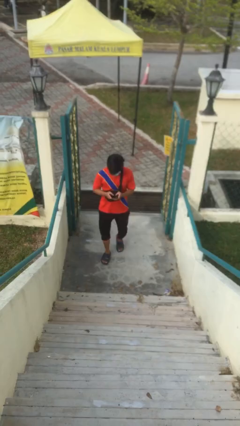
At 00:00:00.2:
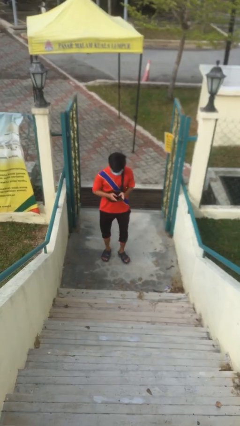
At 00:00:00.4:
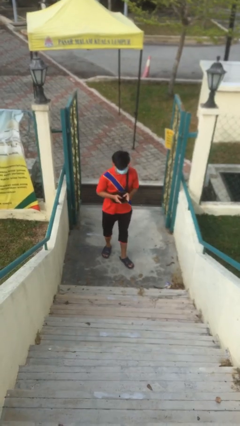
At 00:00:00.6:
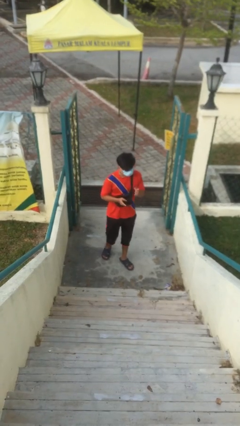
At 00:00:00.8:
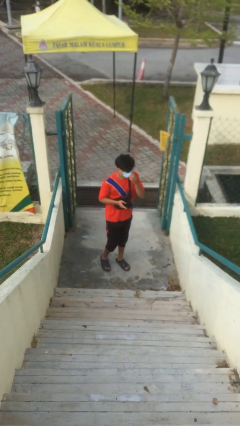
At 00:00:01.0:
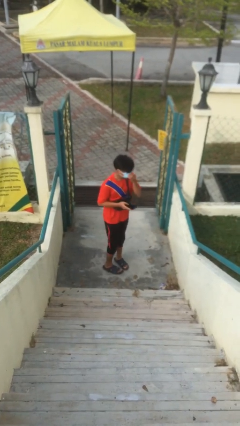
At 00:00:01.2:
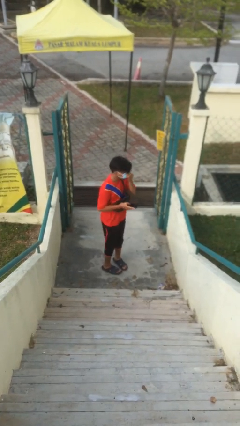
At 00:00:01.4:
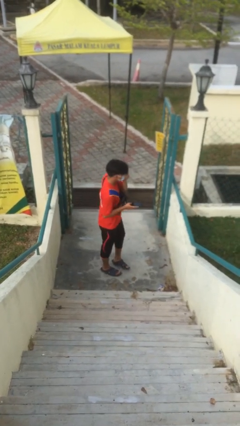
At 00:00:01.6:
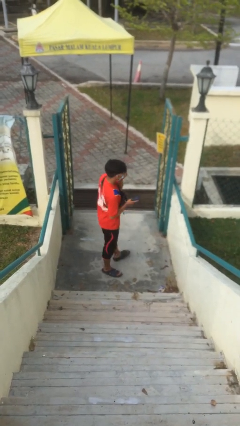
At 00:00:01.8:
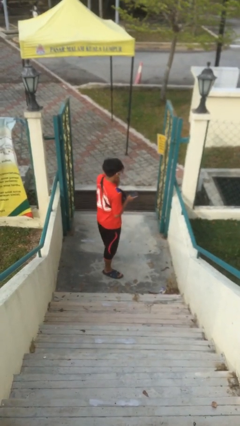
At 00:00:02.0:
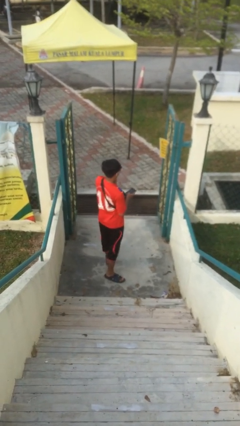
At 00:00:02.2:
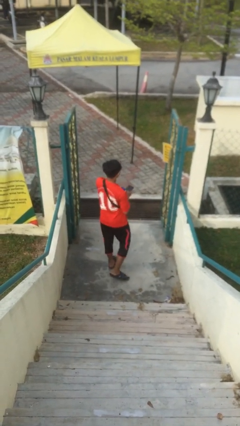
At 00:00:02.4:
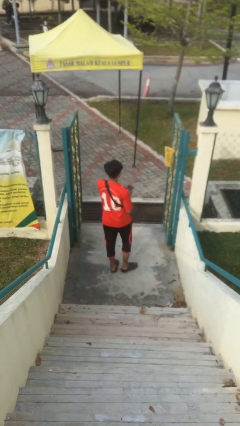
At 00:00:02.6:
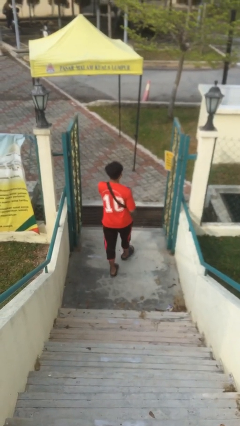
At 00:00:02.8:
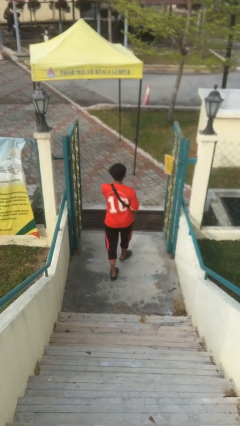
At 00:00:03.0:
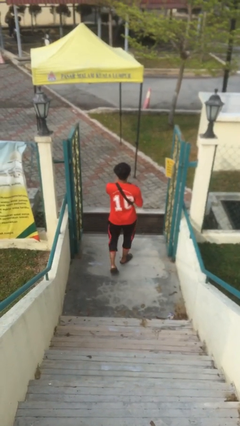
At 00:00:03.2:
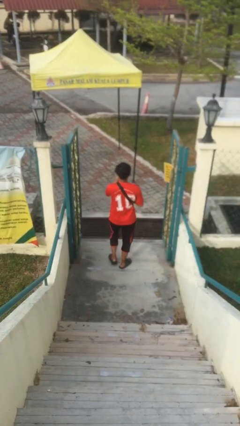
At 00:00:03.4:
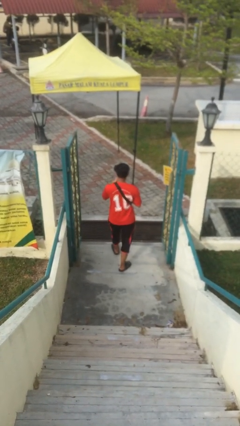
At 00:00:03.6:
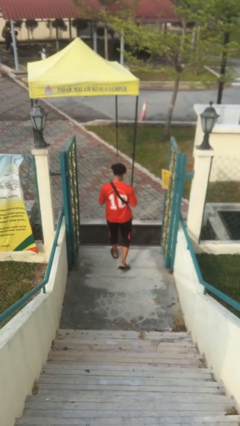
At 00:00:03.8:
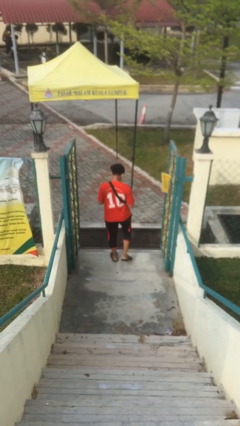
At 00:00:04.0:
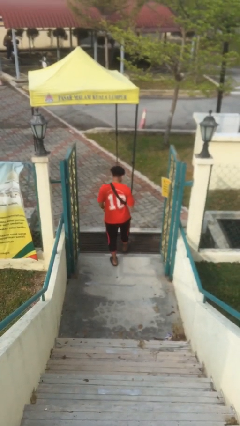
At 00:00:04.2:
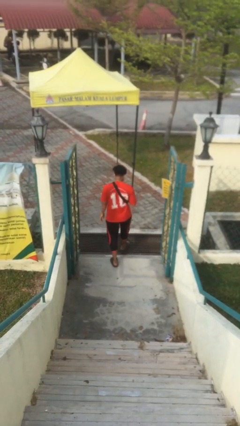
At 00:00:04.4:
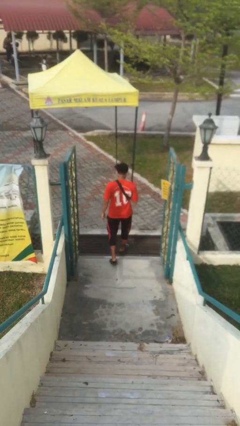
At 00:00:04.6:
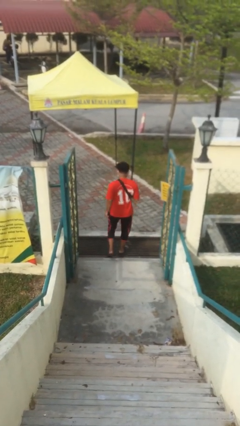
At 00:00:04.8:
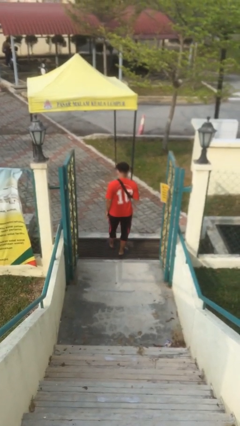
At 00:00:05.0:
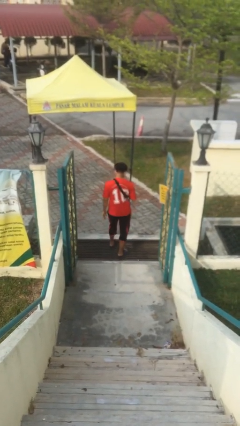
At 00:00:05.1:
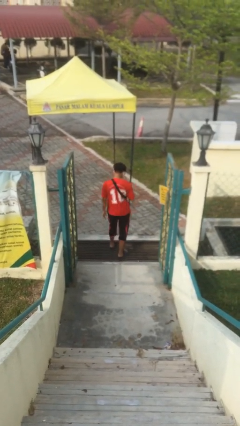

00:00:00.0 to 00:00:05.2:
person exits scene through structure

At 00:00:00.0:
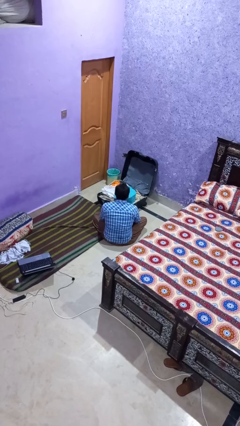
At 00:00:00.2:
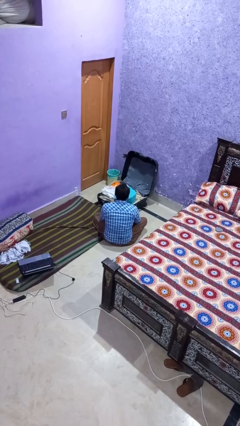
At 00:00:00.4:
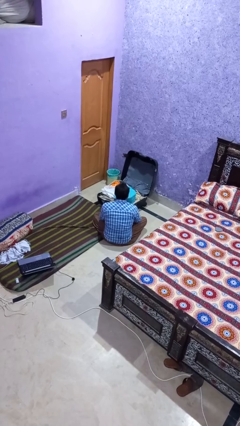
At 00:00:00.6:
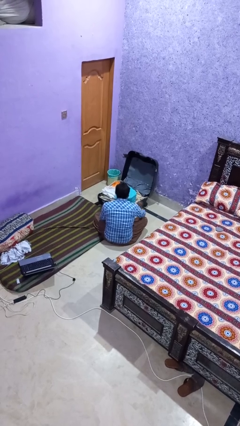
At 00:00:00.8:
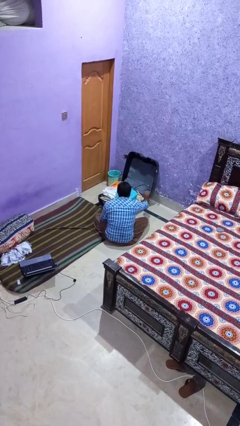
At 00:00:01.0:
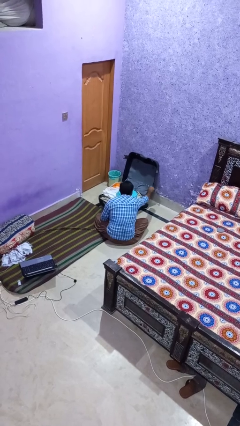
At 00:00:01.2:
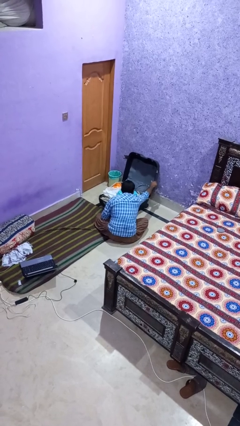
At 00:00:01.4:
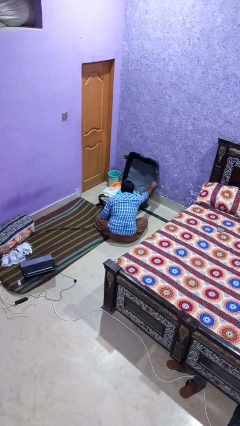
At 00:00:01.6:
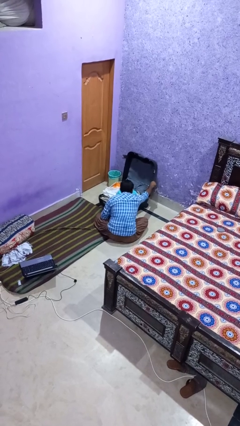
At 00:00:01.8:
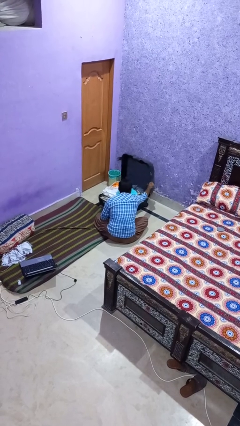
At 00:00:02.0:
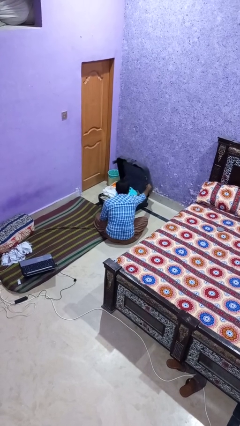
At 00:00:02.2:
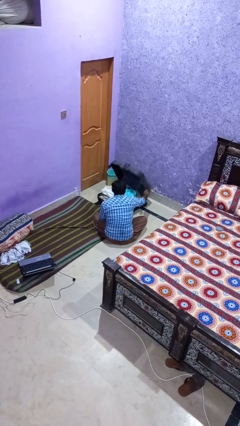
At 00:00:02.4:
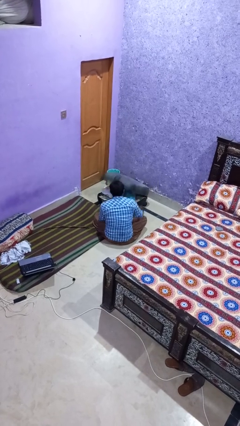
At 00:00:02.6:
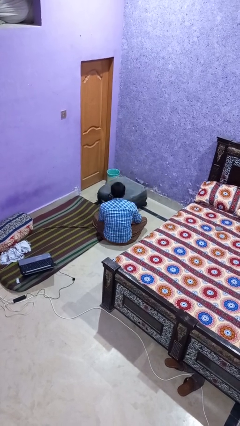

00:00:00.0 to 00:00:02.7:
person closes suitcase

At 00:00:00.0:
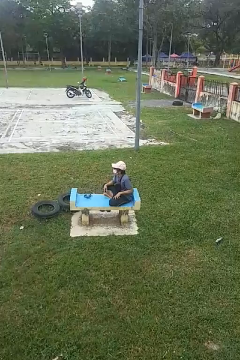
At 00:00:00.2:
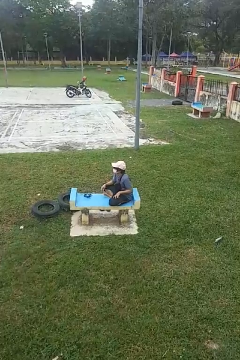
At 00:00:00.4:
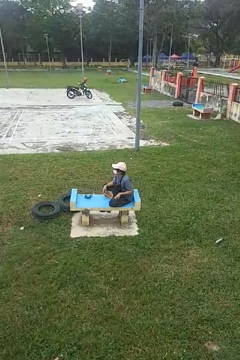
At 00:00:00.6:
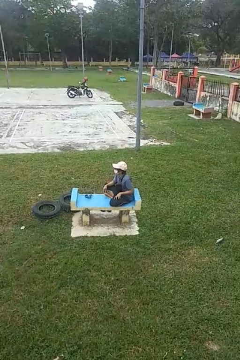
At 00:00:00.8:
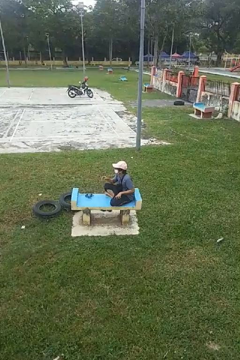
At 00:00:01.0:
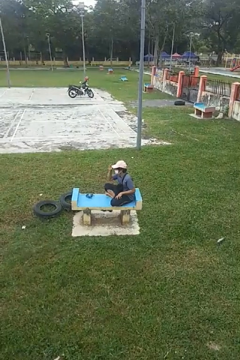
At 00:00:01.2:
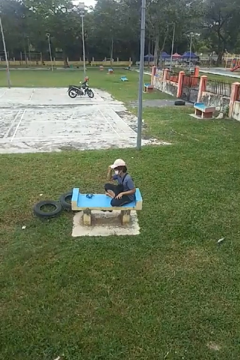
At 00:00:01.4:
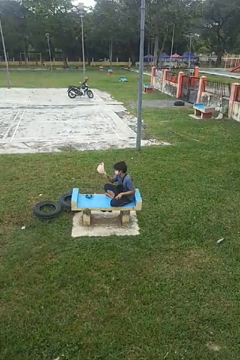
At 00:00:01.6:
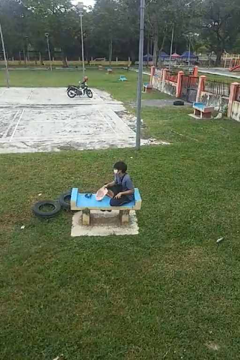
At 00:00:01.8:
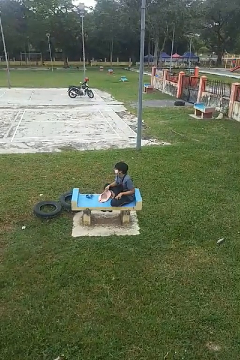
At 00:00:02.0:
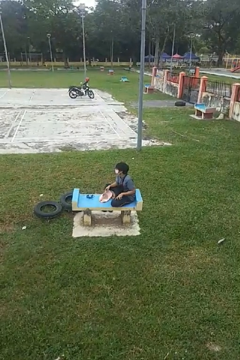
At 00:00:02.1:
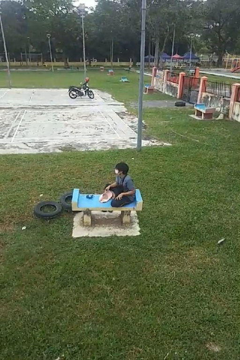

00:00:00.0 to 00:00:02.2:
person takes off hat

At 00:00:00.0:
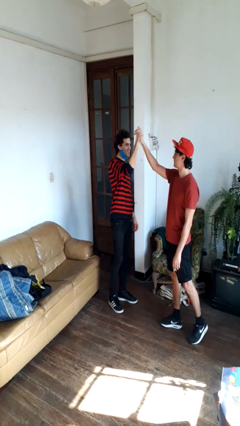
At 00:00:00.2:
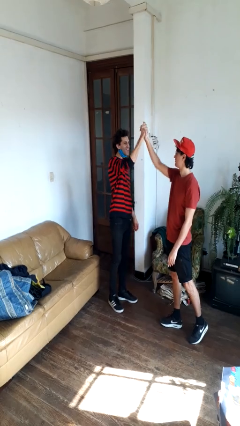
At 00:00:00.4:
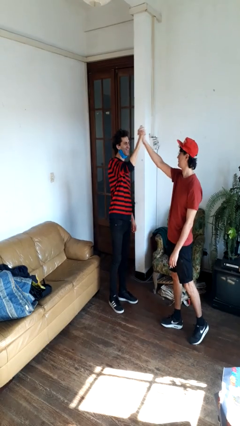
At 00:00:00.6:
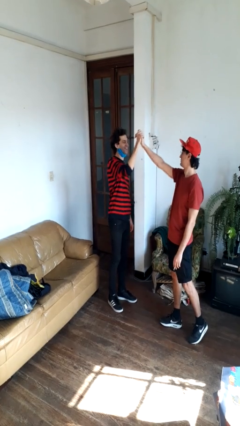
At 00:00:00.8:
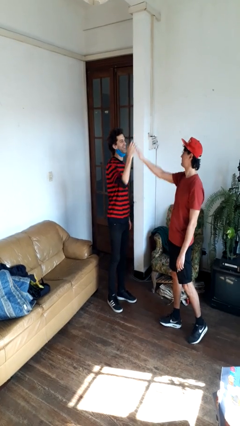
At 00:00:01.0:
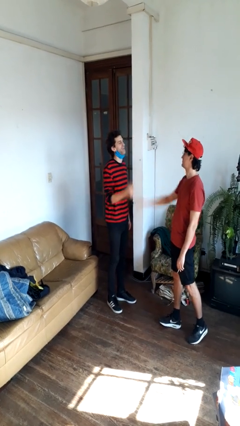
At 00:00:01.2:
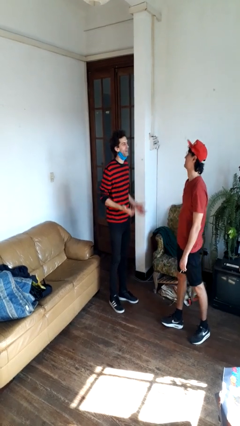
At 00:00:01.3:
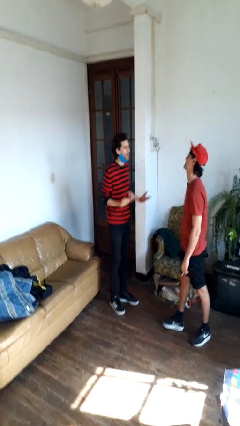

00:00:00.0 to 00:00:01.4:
person highfives hand

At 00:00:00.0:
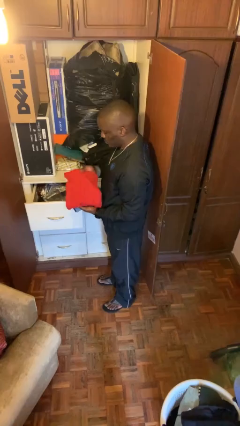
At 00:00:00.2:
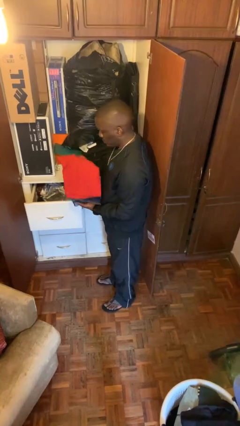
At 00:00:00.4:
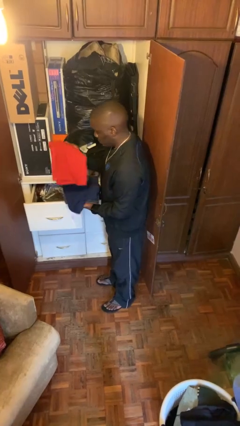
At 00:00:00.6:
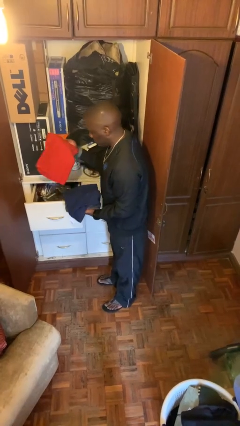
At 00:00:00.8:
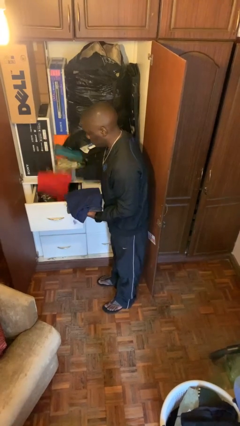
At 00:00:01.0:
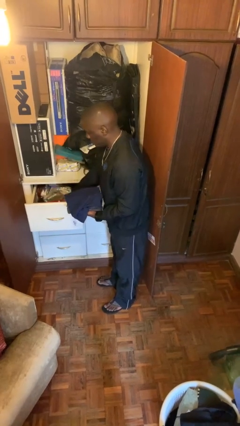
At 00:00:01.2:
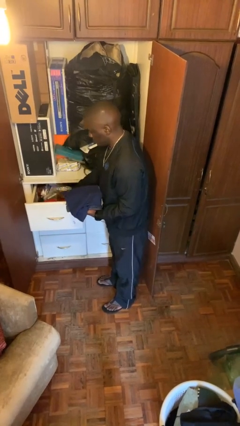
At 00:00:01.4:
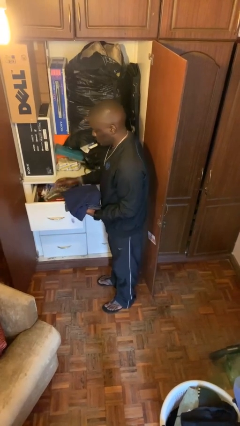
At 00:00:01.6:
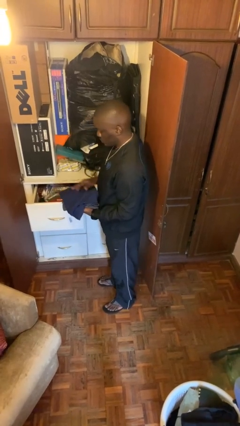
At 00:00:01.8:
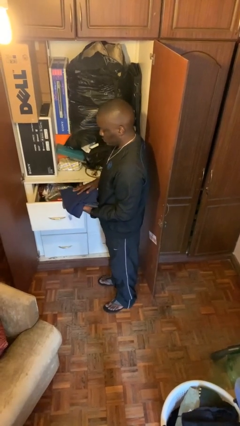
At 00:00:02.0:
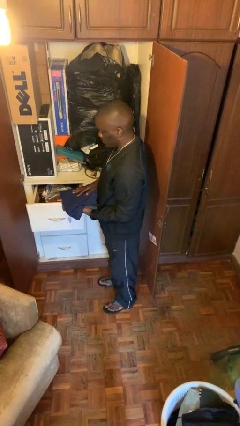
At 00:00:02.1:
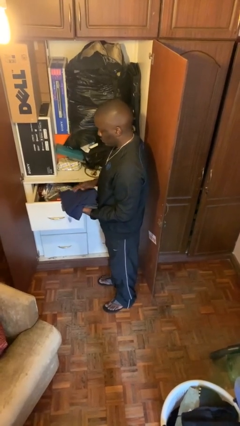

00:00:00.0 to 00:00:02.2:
person puts clothes into dresser

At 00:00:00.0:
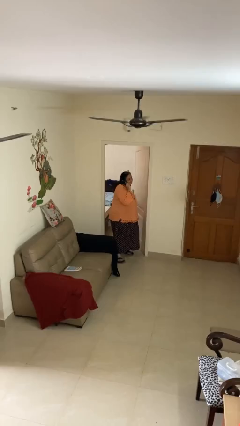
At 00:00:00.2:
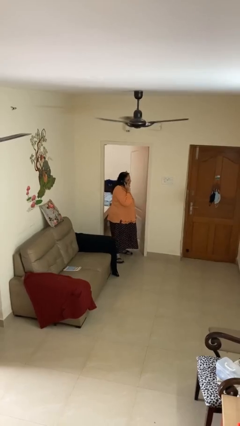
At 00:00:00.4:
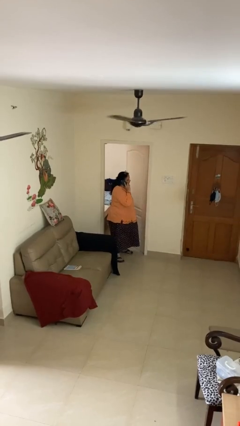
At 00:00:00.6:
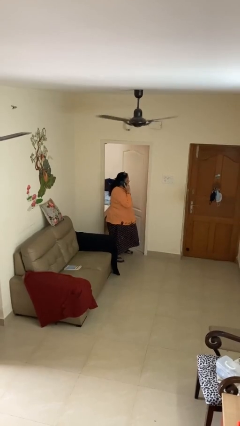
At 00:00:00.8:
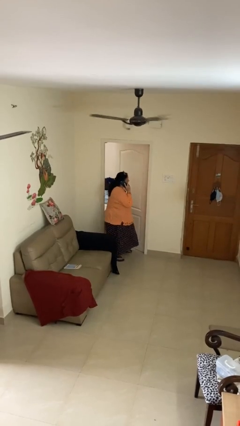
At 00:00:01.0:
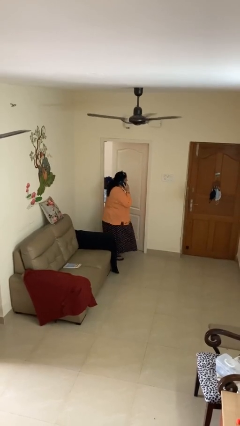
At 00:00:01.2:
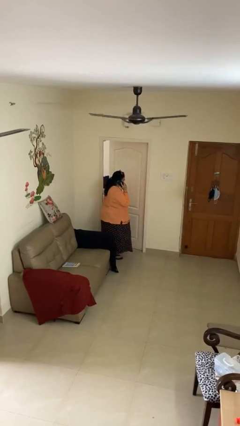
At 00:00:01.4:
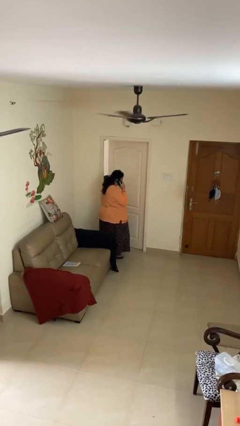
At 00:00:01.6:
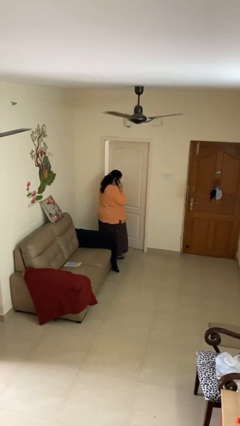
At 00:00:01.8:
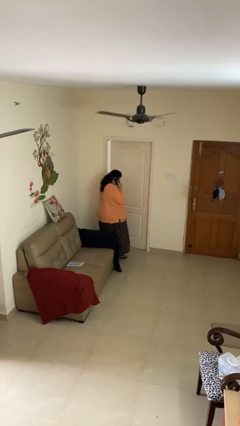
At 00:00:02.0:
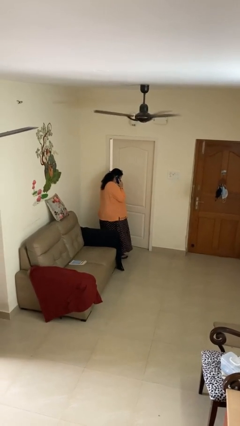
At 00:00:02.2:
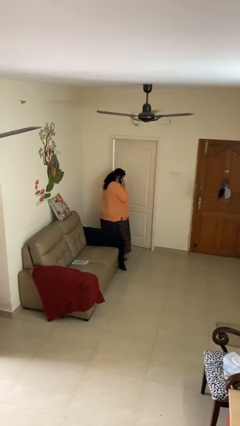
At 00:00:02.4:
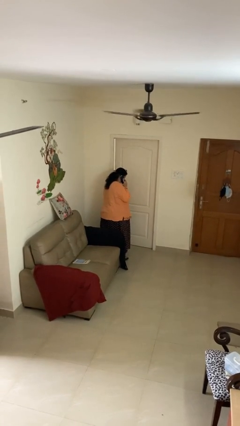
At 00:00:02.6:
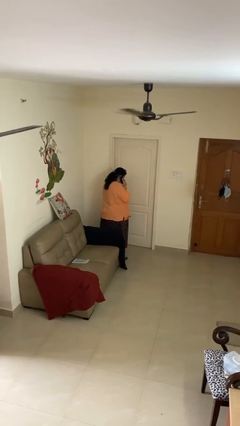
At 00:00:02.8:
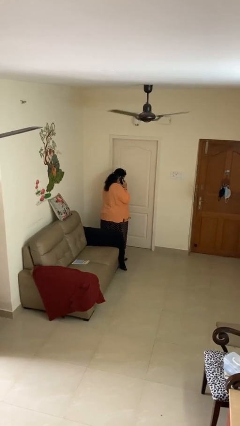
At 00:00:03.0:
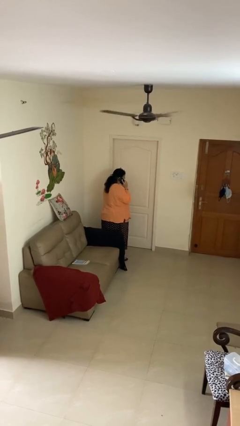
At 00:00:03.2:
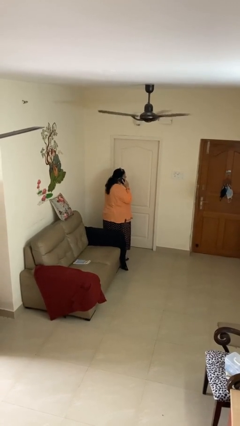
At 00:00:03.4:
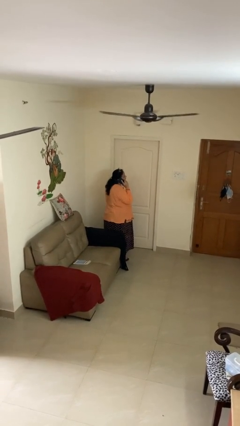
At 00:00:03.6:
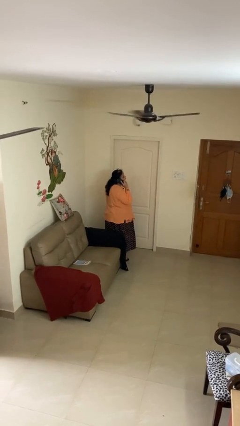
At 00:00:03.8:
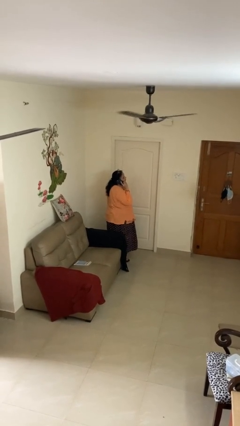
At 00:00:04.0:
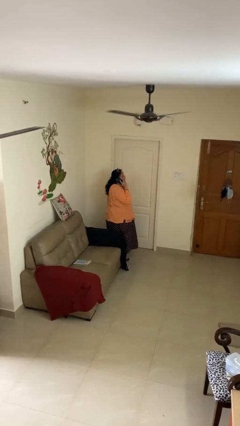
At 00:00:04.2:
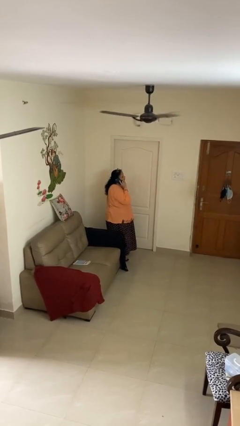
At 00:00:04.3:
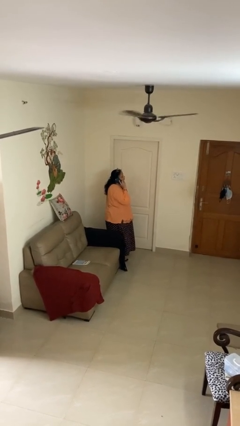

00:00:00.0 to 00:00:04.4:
person closes facility door
